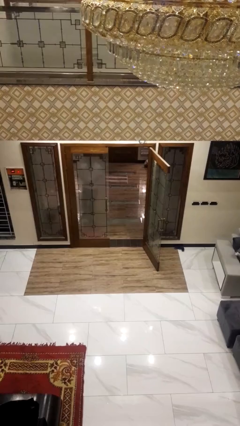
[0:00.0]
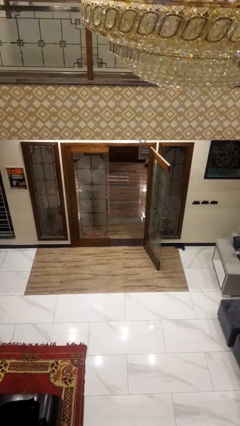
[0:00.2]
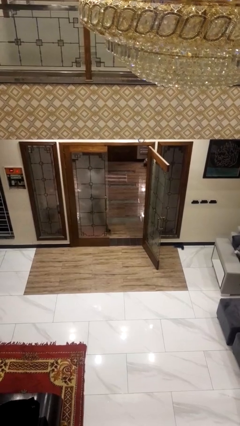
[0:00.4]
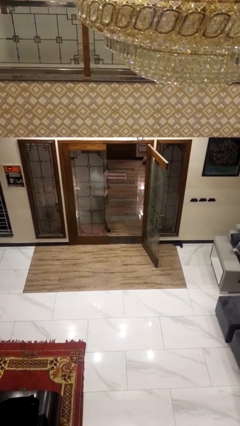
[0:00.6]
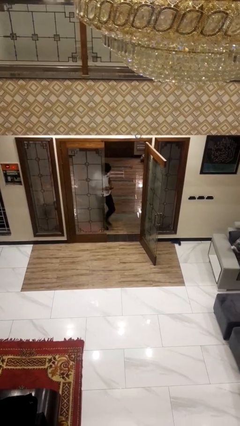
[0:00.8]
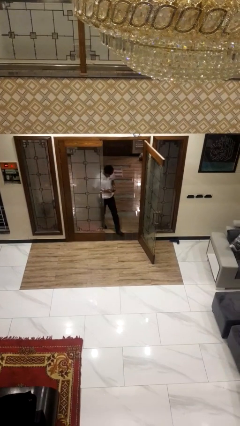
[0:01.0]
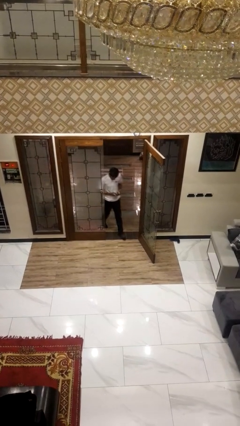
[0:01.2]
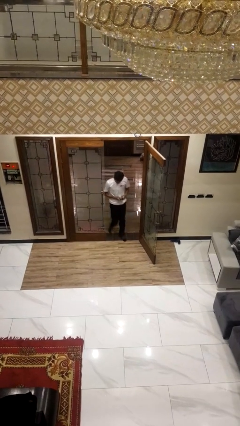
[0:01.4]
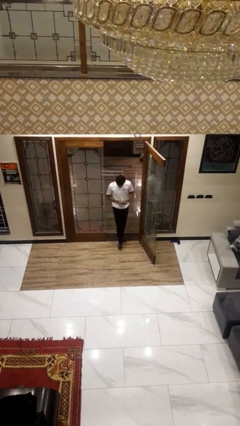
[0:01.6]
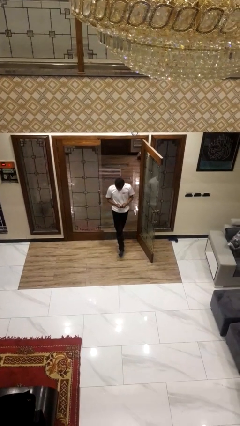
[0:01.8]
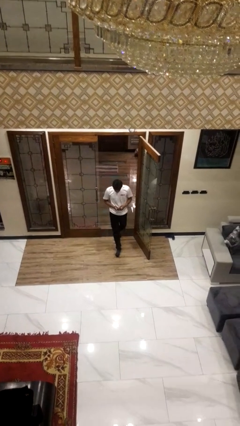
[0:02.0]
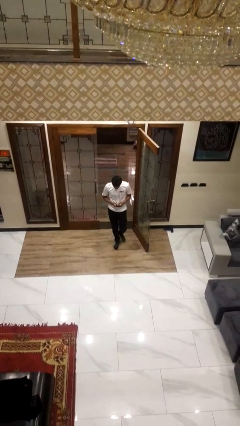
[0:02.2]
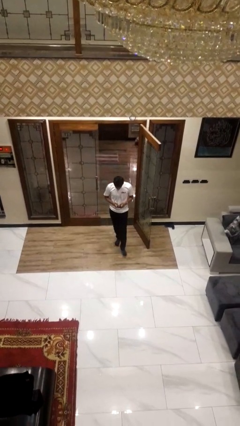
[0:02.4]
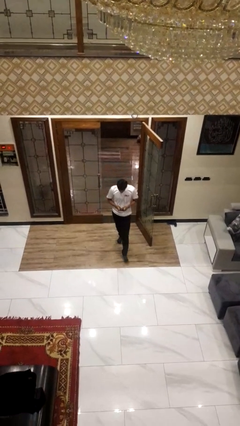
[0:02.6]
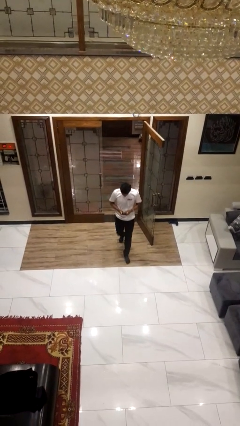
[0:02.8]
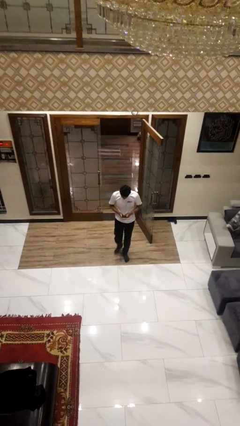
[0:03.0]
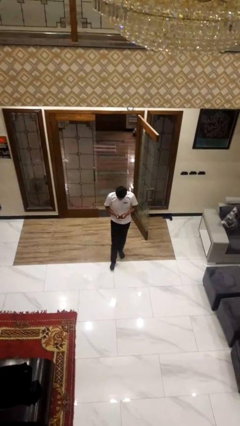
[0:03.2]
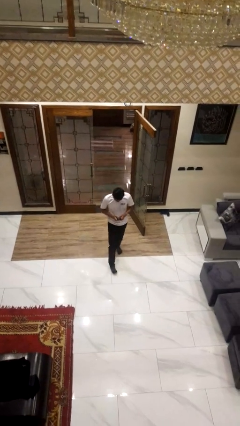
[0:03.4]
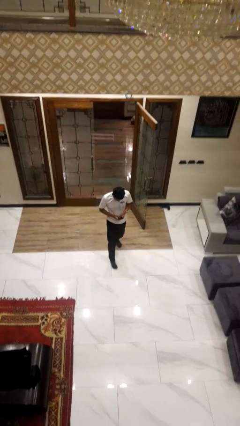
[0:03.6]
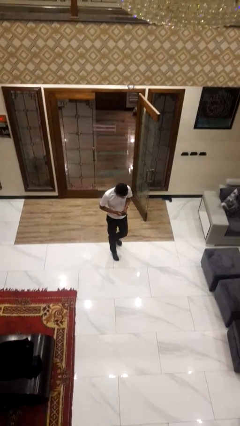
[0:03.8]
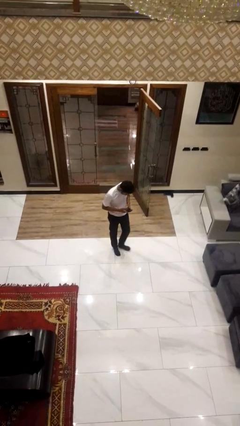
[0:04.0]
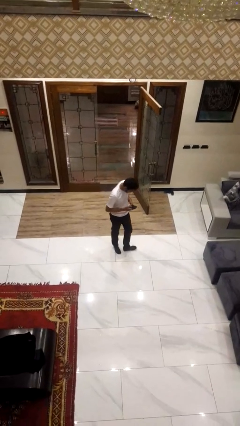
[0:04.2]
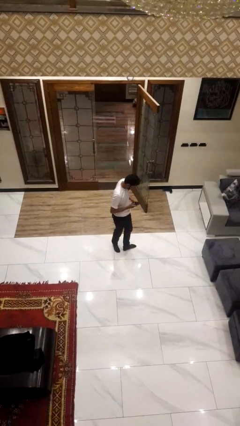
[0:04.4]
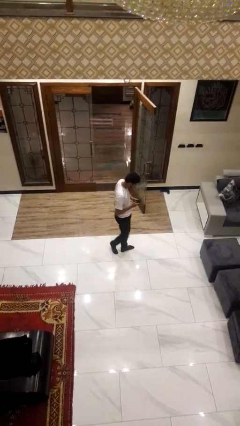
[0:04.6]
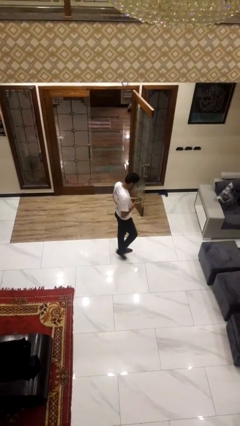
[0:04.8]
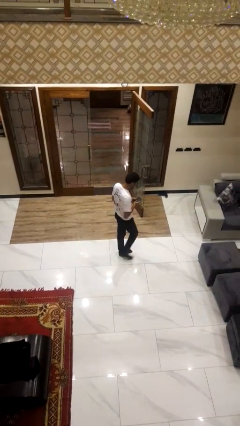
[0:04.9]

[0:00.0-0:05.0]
person enters scene through structure

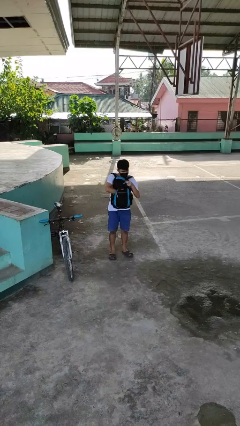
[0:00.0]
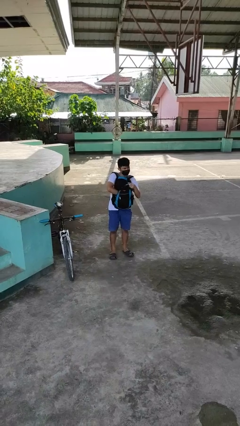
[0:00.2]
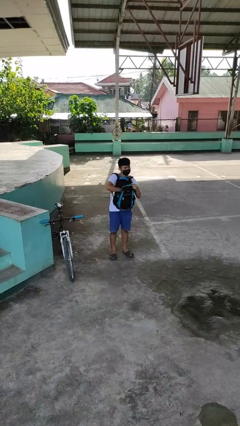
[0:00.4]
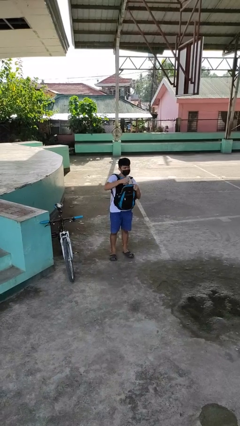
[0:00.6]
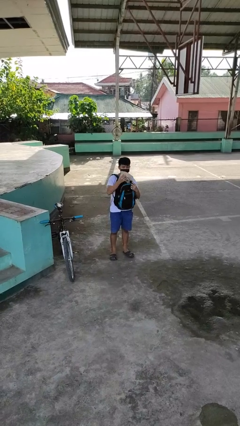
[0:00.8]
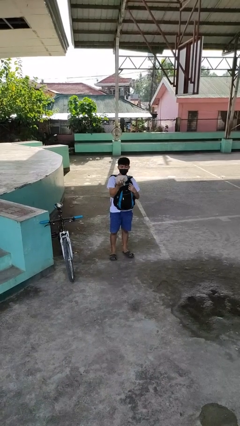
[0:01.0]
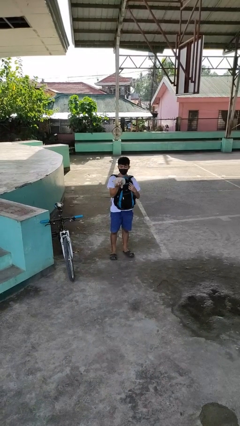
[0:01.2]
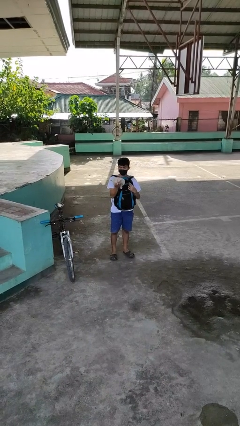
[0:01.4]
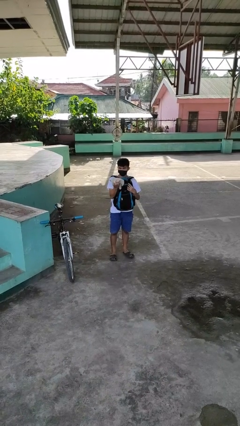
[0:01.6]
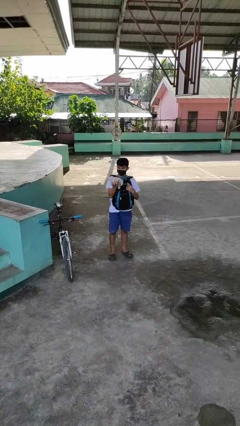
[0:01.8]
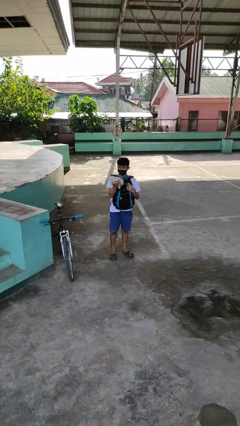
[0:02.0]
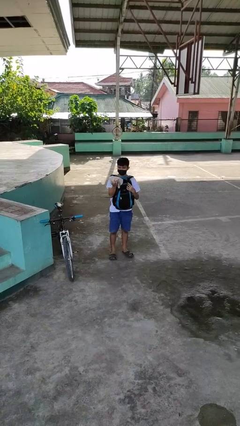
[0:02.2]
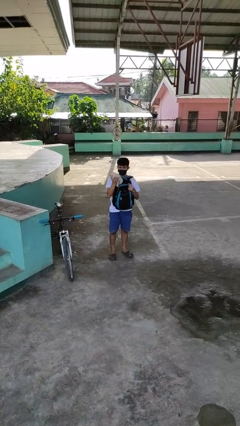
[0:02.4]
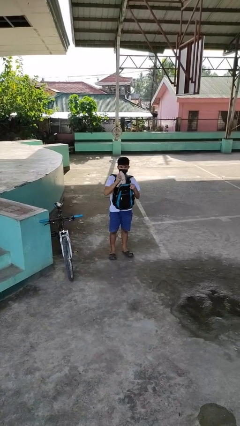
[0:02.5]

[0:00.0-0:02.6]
person takes object from backpack

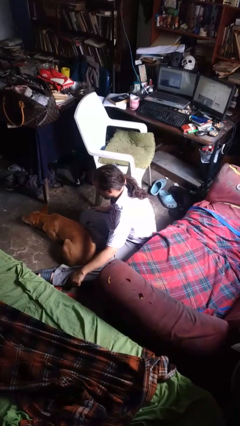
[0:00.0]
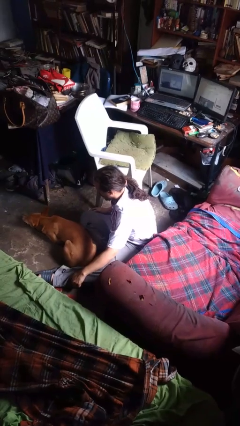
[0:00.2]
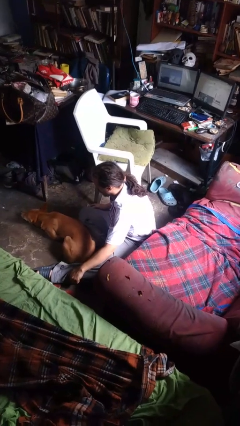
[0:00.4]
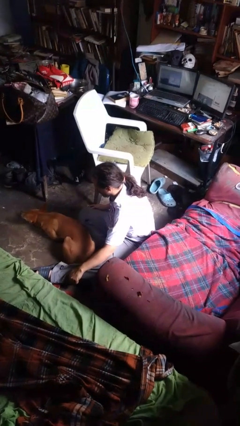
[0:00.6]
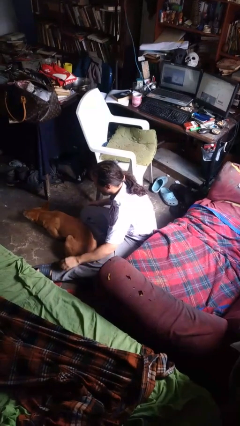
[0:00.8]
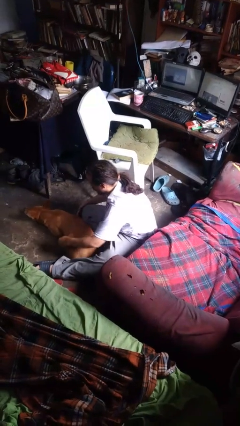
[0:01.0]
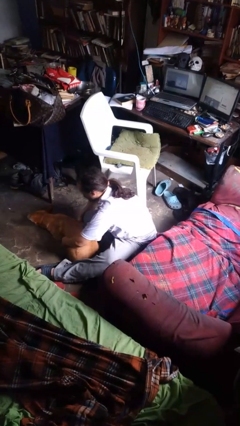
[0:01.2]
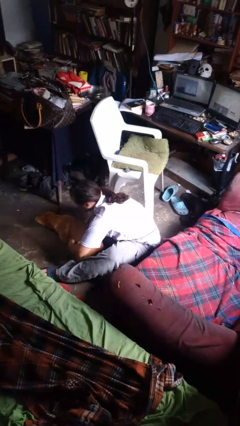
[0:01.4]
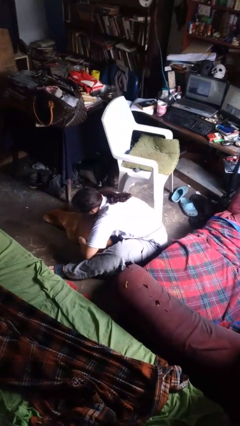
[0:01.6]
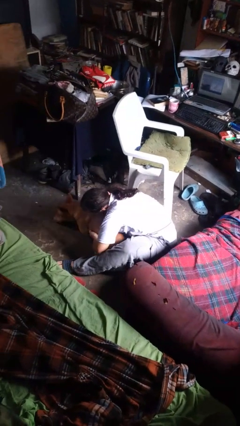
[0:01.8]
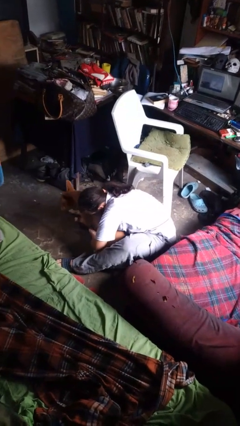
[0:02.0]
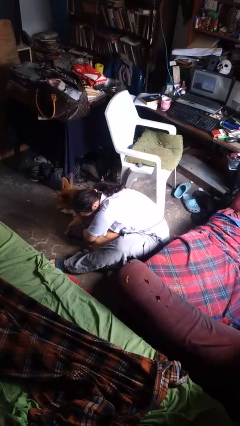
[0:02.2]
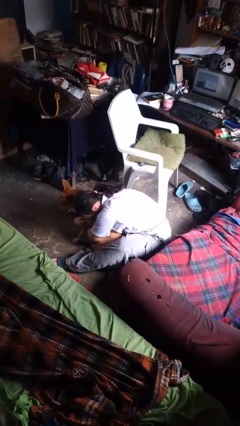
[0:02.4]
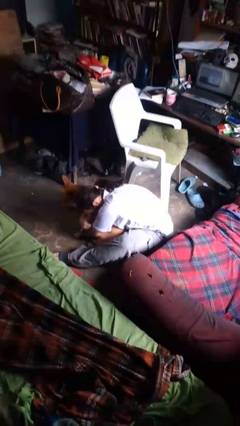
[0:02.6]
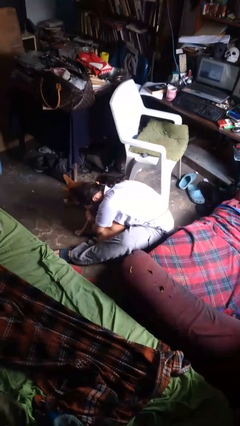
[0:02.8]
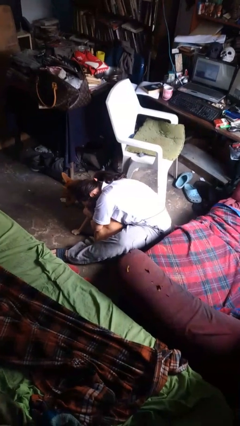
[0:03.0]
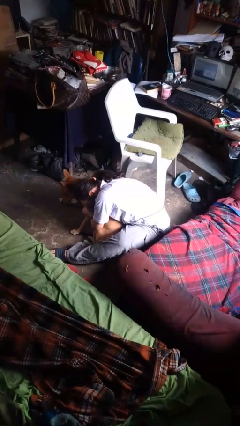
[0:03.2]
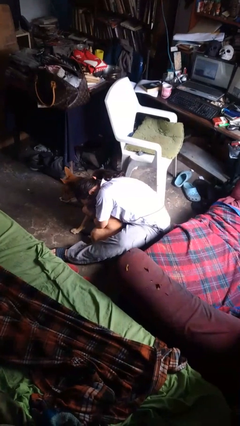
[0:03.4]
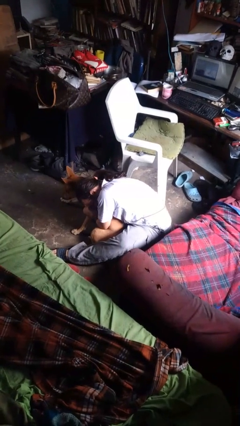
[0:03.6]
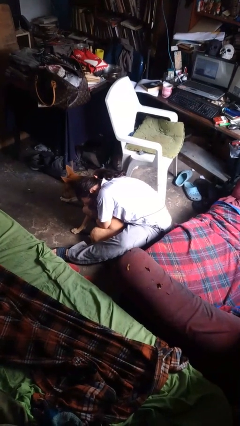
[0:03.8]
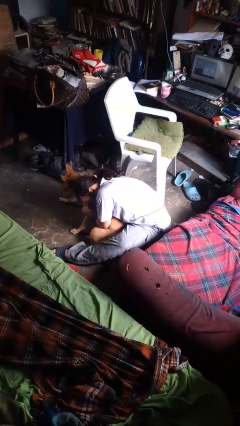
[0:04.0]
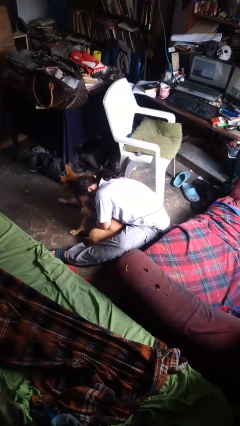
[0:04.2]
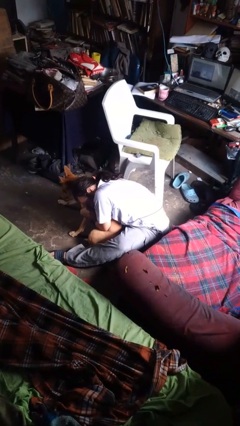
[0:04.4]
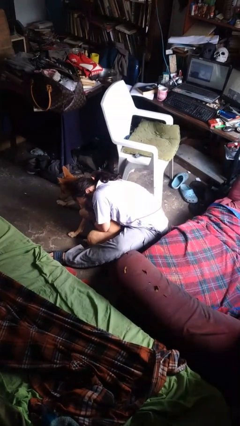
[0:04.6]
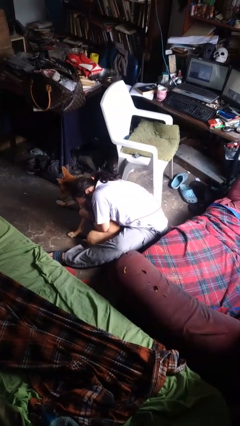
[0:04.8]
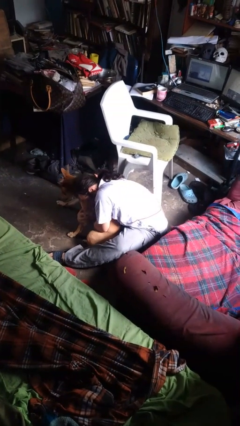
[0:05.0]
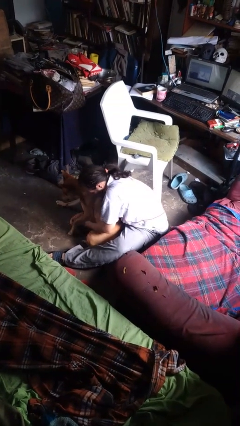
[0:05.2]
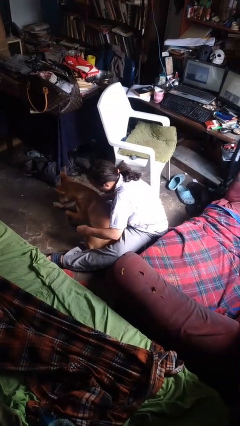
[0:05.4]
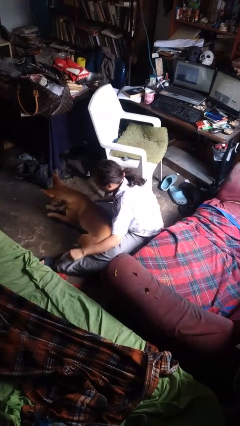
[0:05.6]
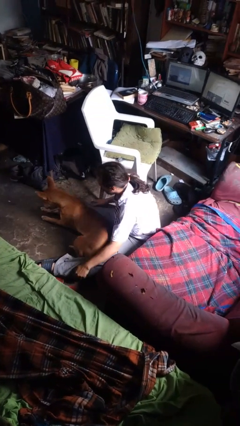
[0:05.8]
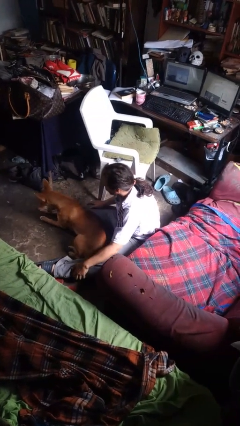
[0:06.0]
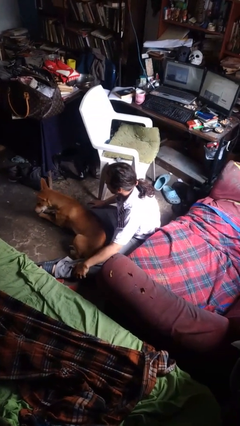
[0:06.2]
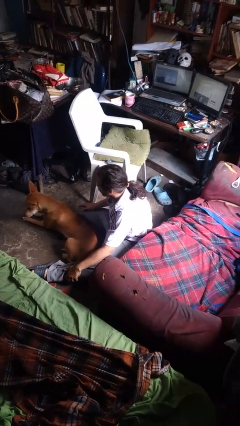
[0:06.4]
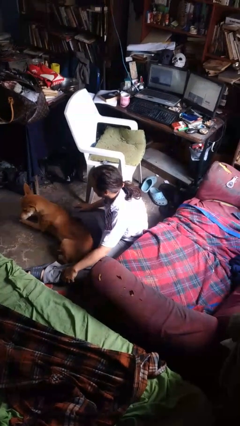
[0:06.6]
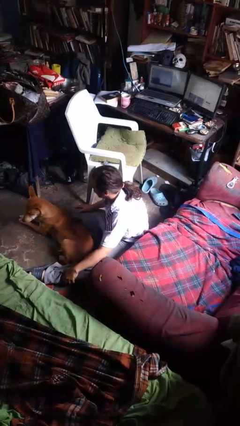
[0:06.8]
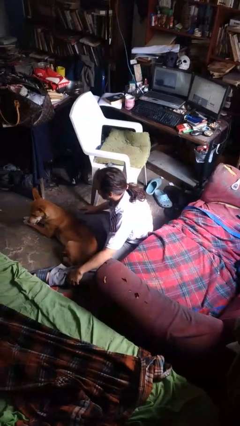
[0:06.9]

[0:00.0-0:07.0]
person hugs dog

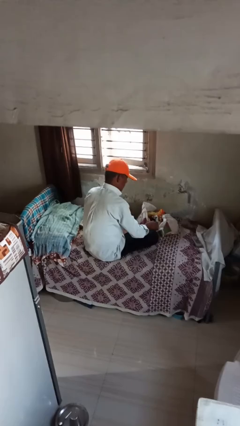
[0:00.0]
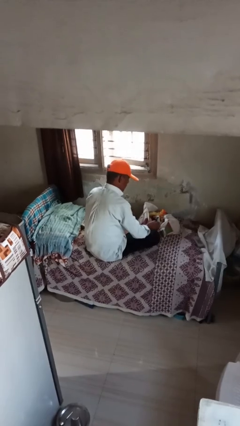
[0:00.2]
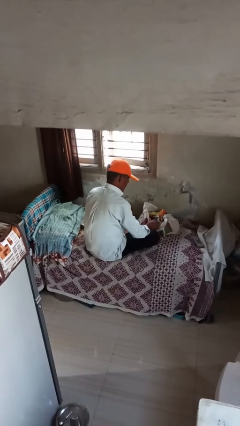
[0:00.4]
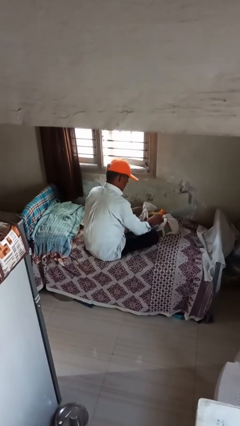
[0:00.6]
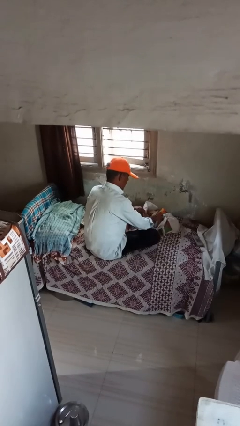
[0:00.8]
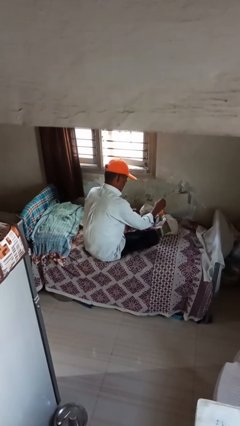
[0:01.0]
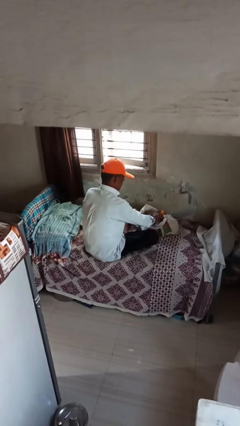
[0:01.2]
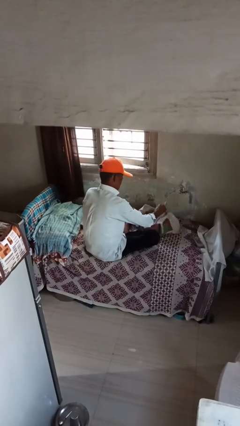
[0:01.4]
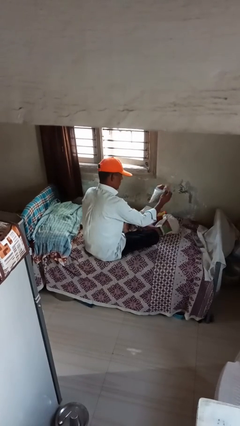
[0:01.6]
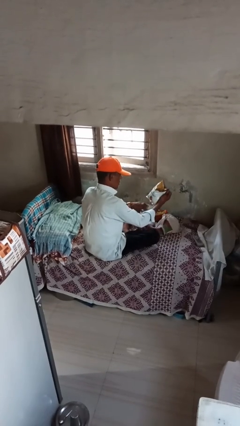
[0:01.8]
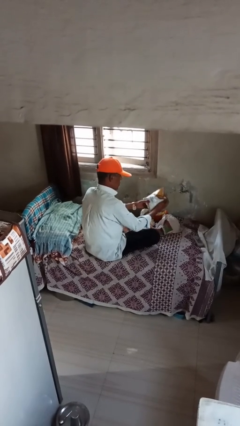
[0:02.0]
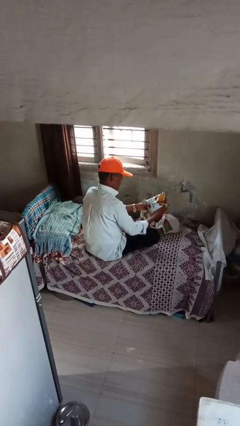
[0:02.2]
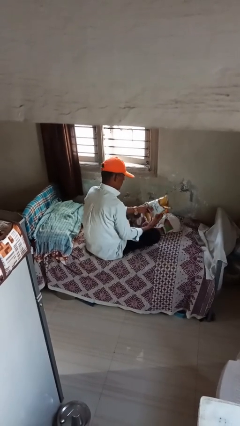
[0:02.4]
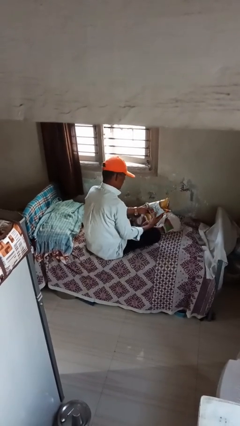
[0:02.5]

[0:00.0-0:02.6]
person takes object from bag

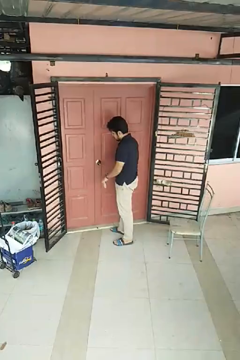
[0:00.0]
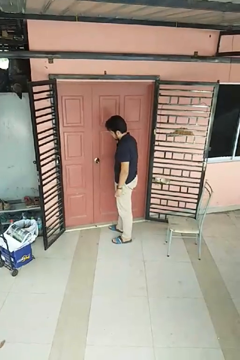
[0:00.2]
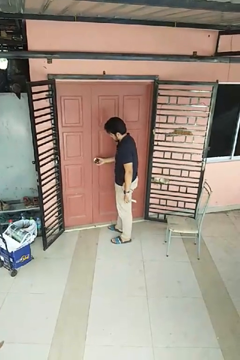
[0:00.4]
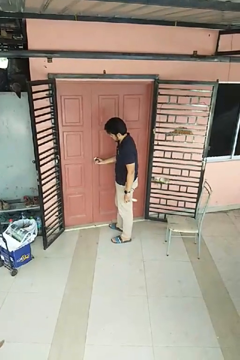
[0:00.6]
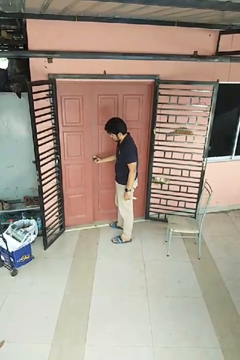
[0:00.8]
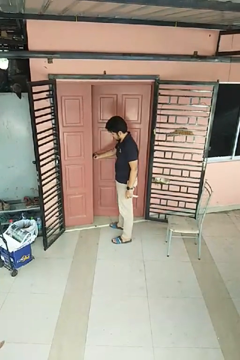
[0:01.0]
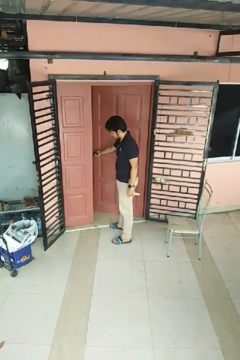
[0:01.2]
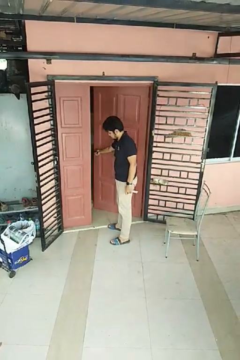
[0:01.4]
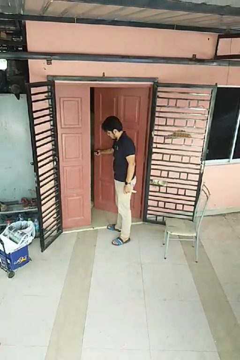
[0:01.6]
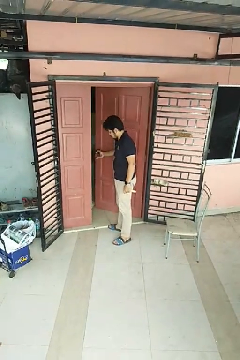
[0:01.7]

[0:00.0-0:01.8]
person opens facility door
